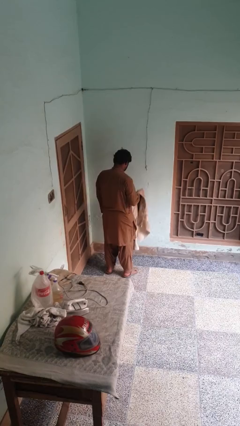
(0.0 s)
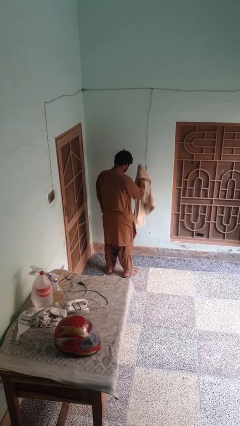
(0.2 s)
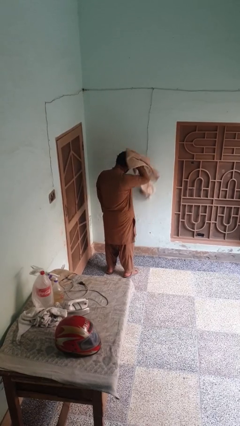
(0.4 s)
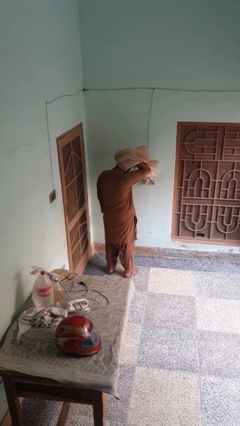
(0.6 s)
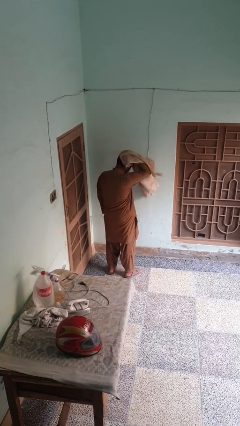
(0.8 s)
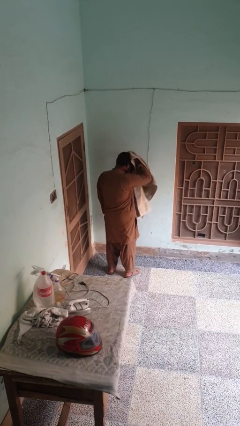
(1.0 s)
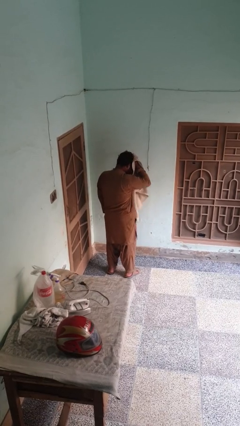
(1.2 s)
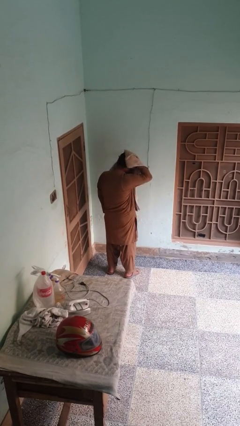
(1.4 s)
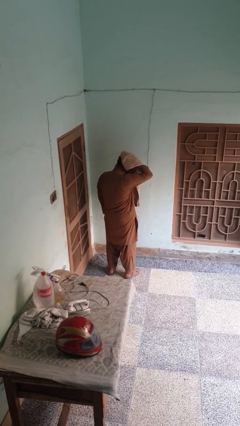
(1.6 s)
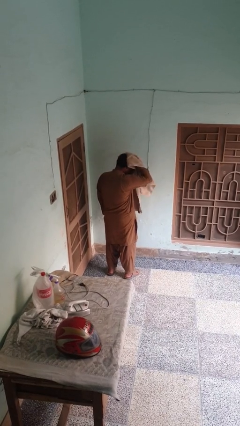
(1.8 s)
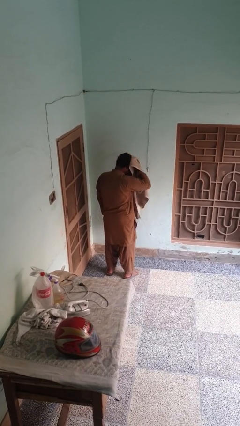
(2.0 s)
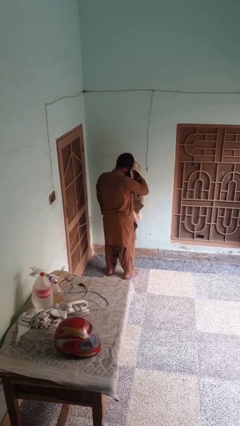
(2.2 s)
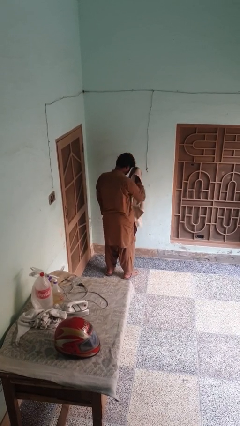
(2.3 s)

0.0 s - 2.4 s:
person dries hair with towel

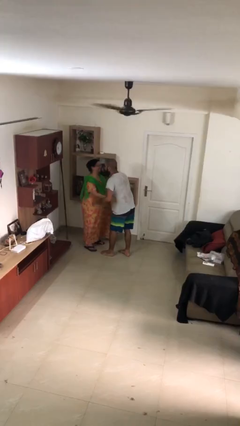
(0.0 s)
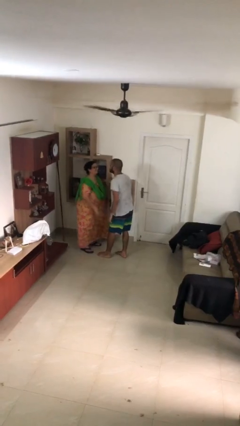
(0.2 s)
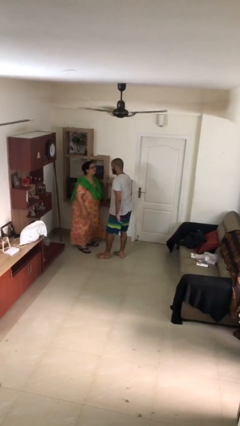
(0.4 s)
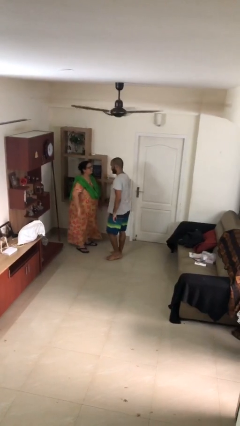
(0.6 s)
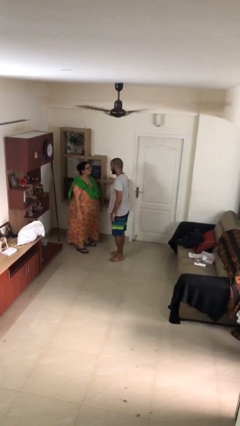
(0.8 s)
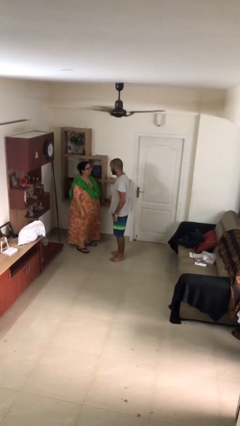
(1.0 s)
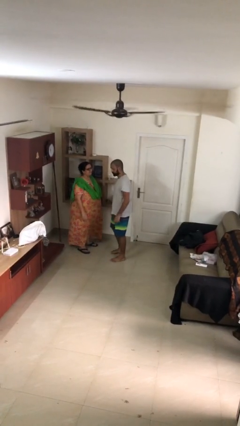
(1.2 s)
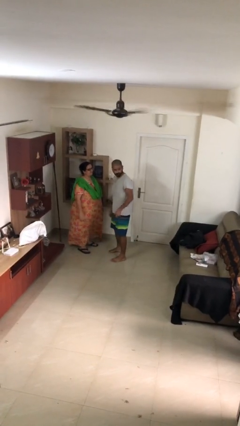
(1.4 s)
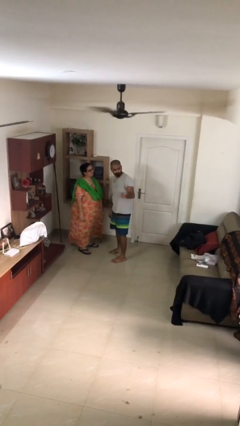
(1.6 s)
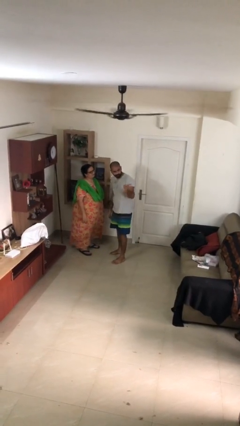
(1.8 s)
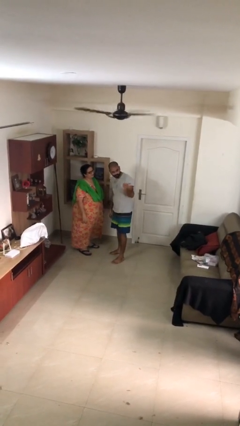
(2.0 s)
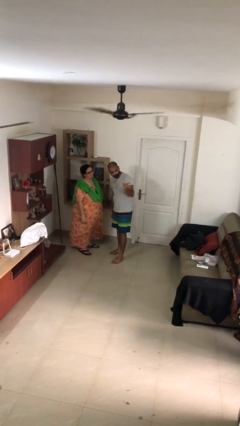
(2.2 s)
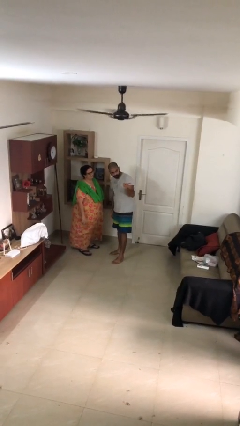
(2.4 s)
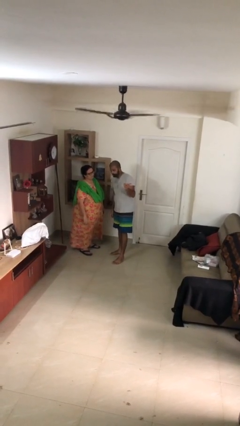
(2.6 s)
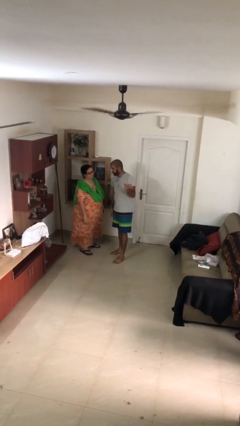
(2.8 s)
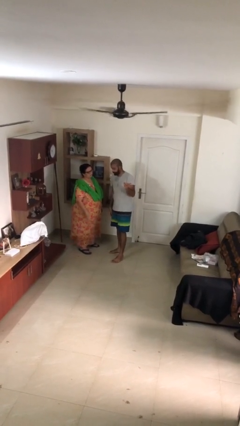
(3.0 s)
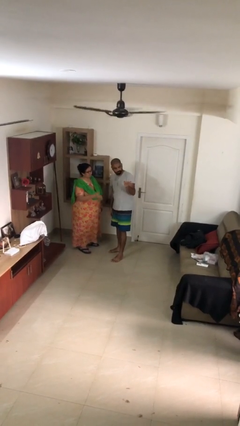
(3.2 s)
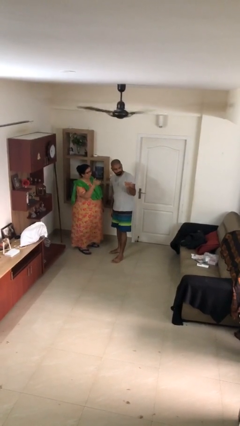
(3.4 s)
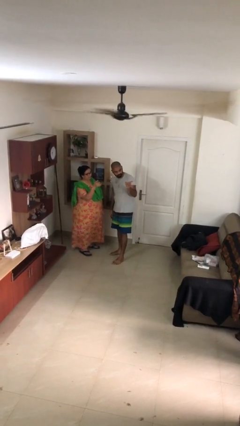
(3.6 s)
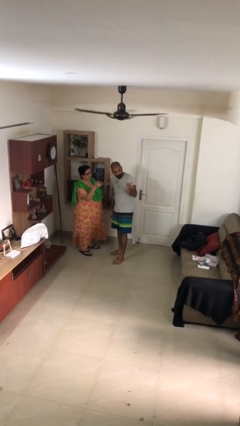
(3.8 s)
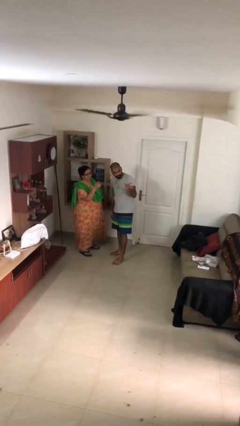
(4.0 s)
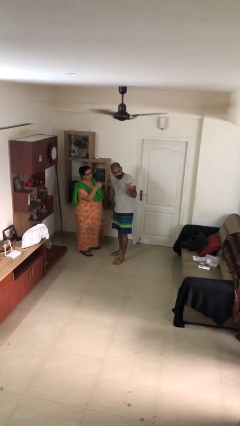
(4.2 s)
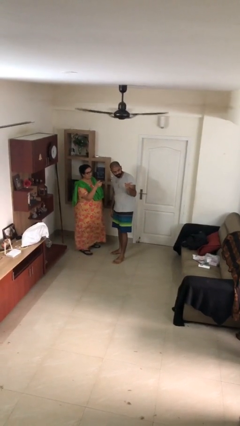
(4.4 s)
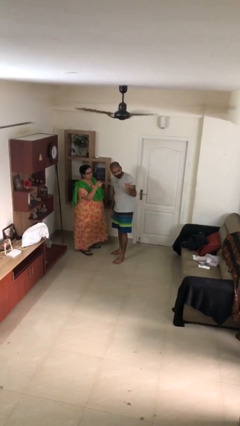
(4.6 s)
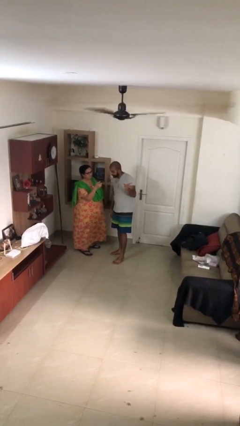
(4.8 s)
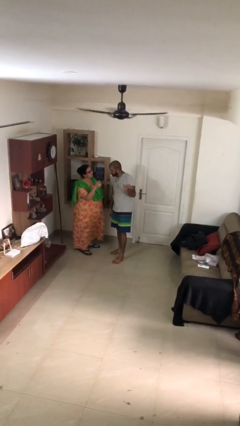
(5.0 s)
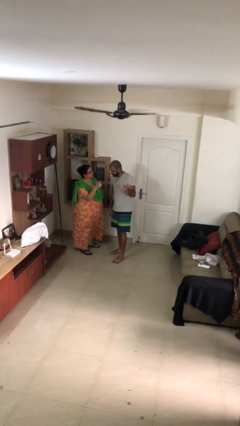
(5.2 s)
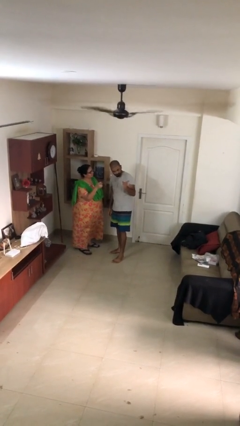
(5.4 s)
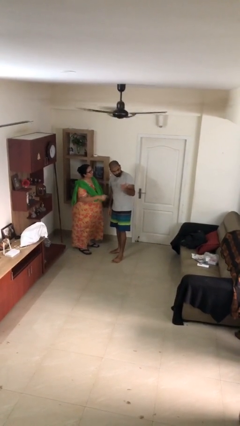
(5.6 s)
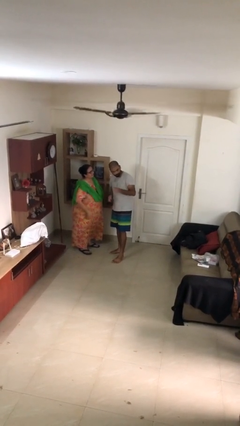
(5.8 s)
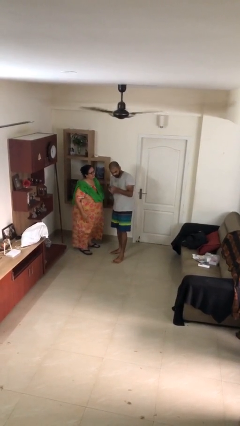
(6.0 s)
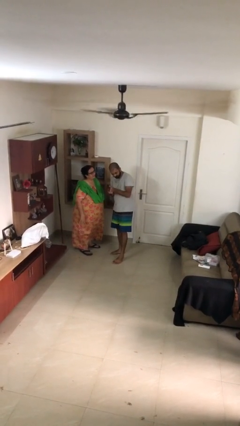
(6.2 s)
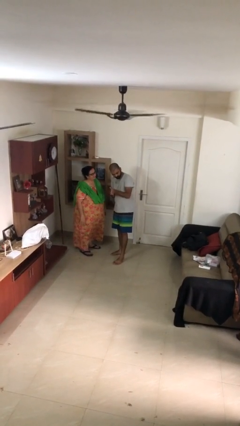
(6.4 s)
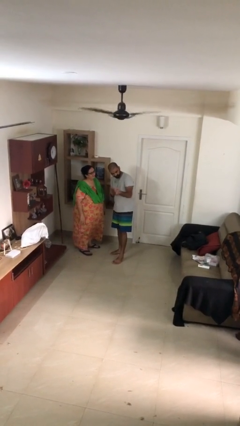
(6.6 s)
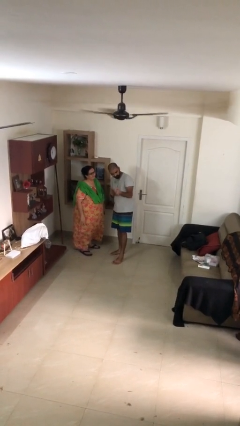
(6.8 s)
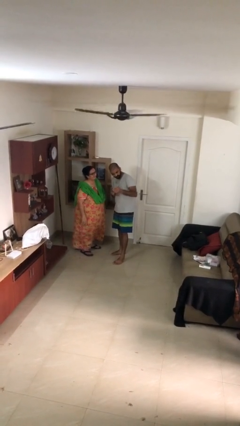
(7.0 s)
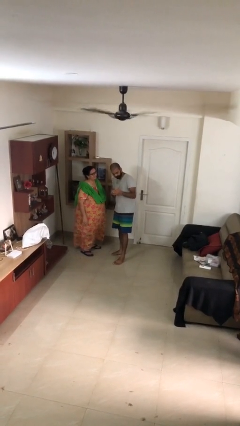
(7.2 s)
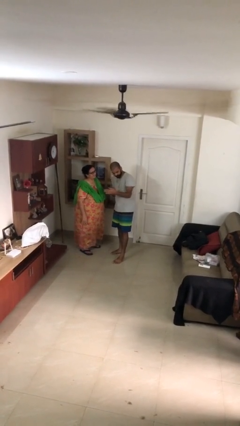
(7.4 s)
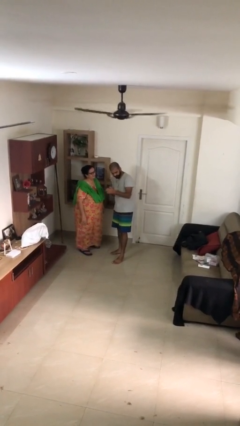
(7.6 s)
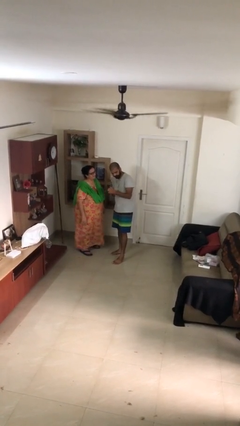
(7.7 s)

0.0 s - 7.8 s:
person talks to person

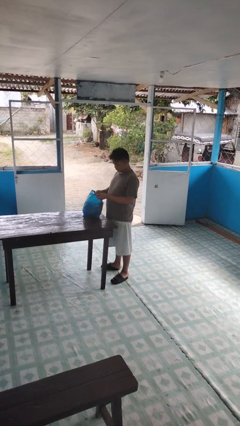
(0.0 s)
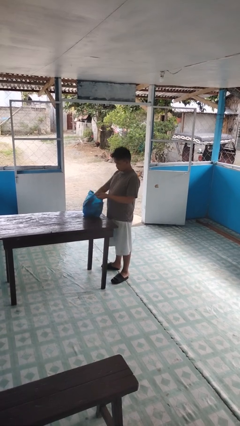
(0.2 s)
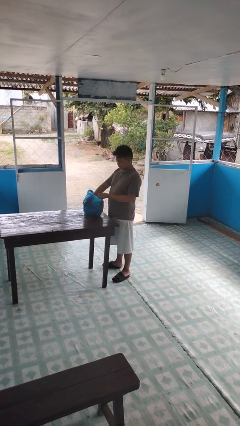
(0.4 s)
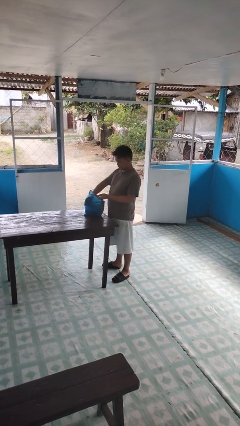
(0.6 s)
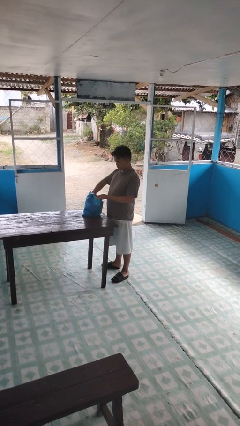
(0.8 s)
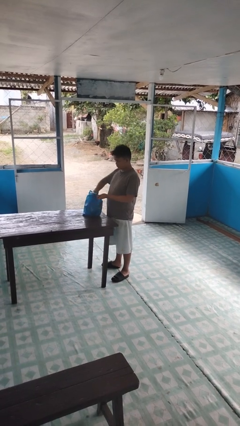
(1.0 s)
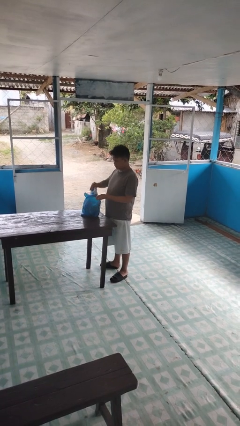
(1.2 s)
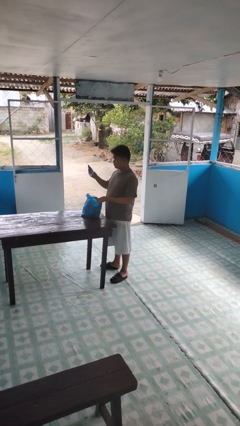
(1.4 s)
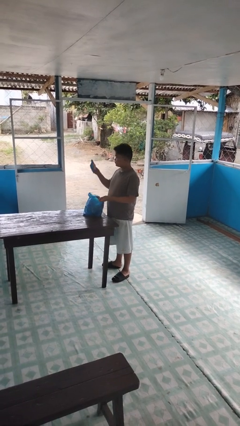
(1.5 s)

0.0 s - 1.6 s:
person takes object from bag

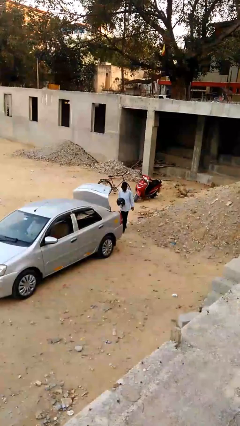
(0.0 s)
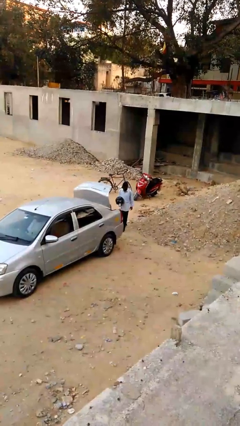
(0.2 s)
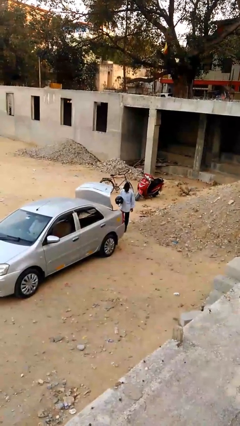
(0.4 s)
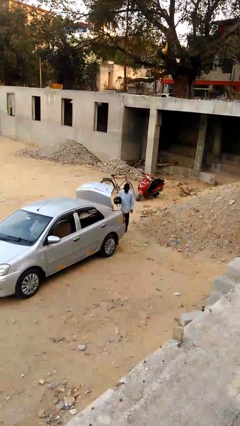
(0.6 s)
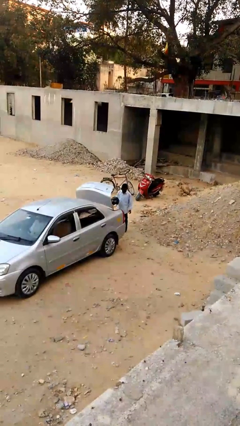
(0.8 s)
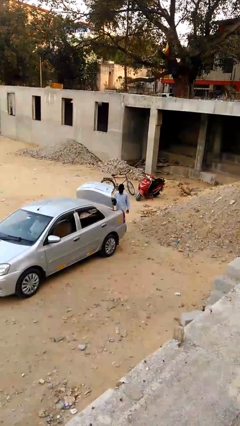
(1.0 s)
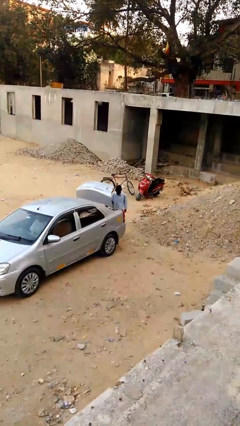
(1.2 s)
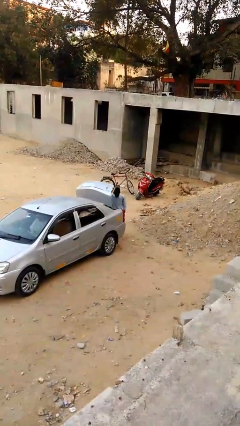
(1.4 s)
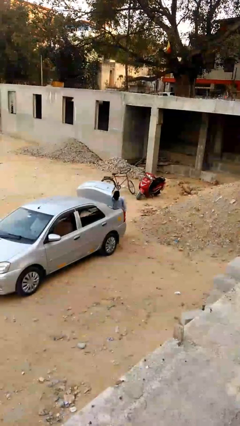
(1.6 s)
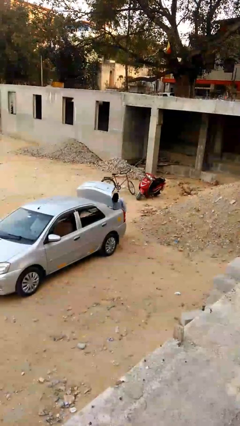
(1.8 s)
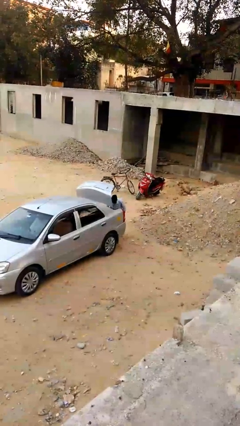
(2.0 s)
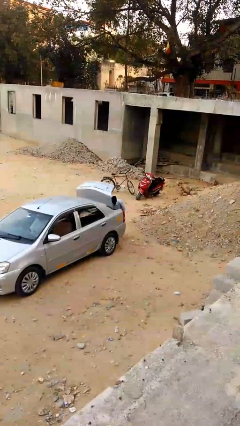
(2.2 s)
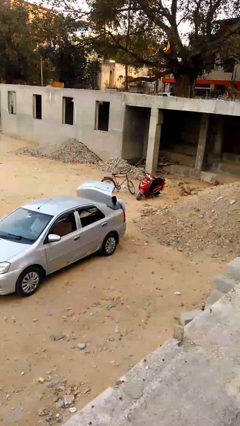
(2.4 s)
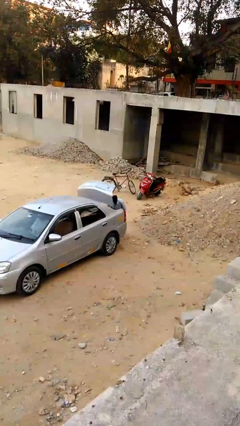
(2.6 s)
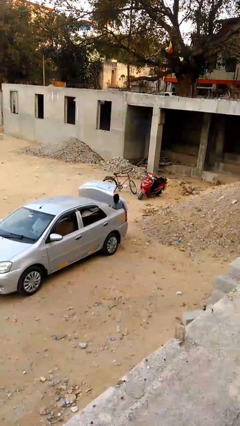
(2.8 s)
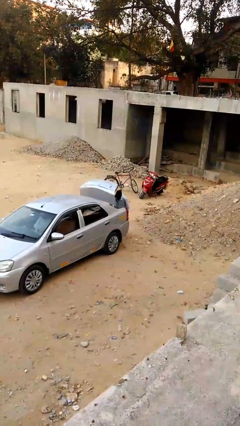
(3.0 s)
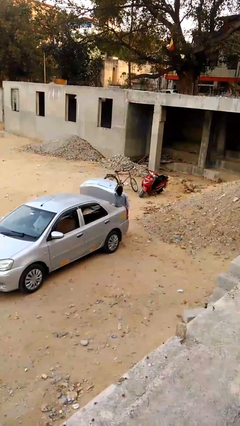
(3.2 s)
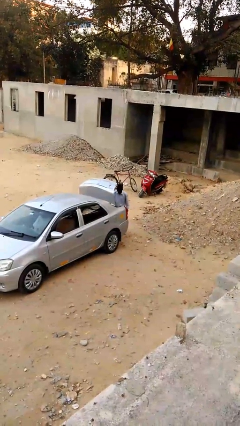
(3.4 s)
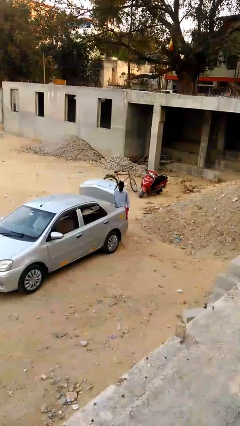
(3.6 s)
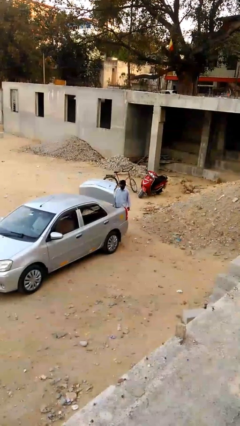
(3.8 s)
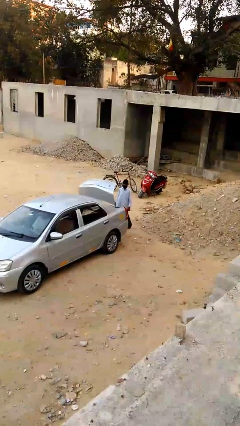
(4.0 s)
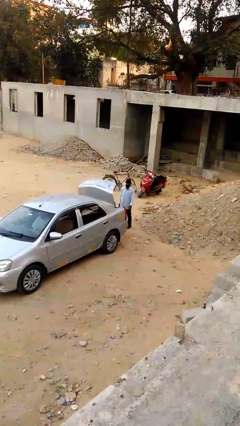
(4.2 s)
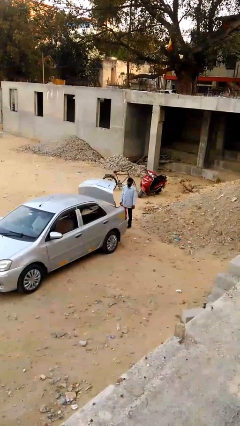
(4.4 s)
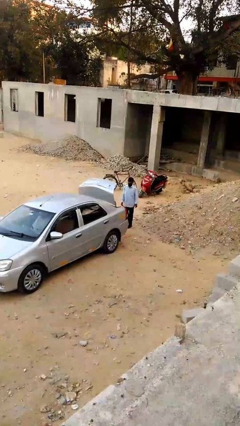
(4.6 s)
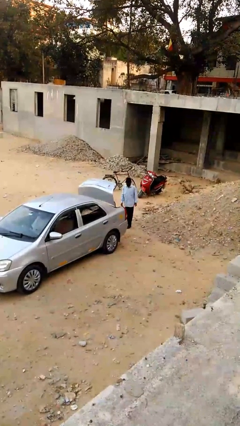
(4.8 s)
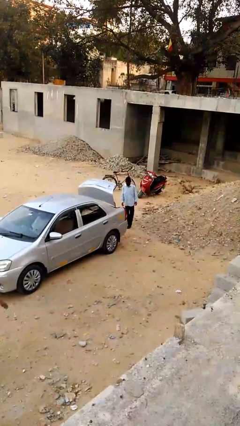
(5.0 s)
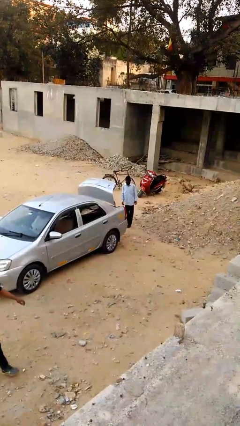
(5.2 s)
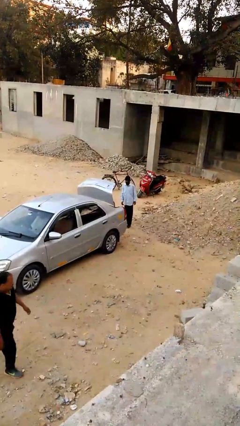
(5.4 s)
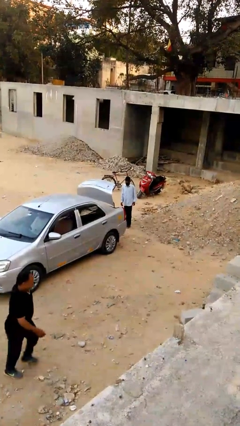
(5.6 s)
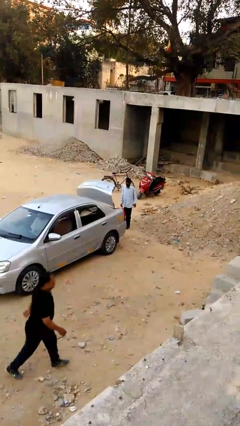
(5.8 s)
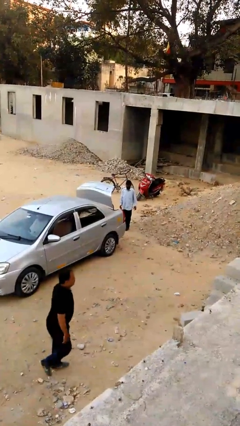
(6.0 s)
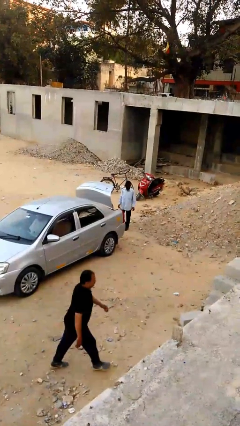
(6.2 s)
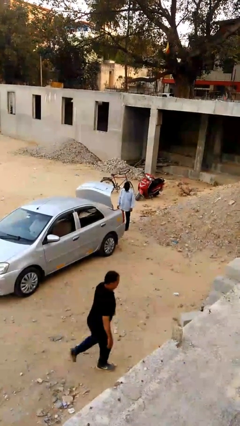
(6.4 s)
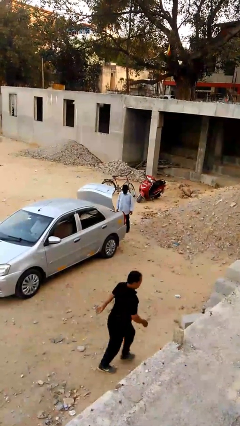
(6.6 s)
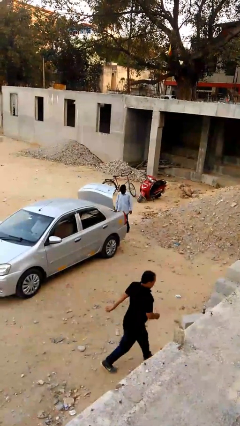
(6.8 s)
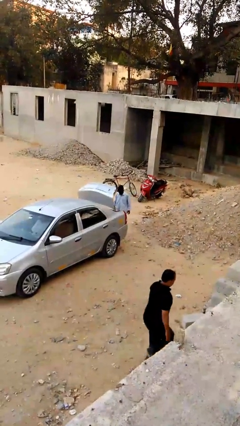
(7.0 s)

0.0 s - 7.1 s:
person loads car
